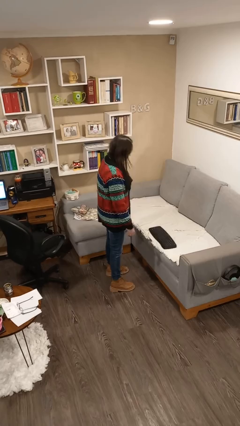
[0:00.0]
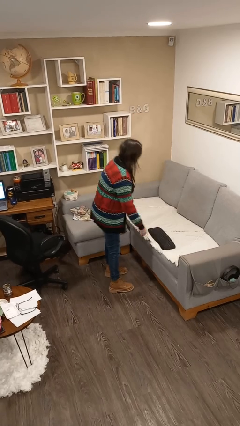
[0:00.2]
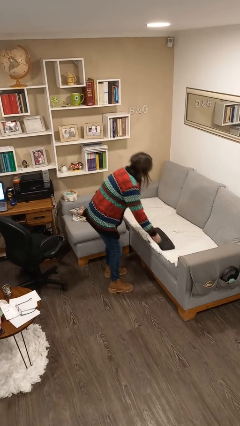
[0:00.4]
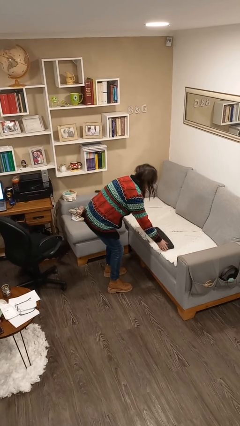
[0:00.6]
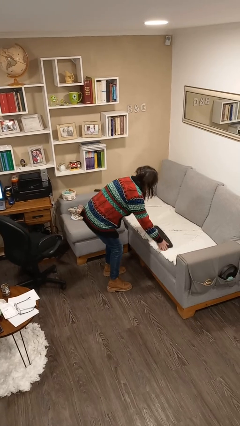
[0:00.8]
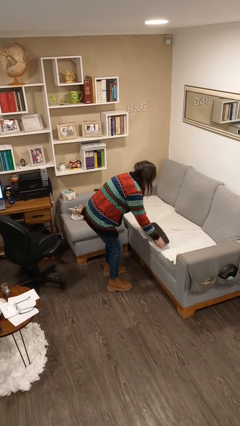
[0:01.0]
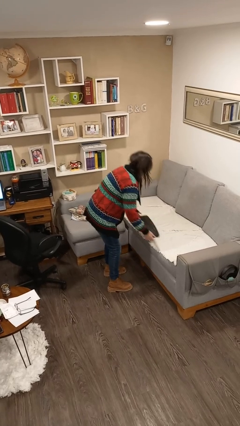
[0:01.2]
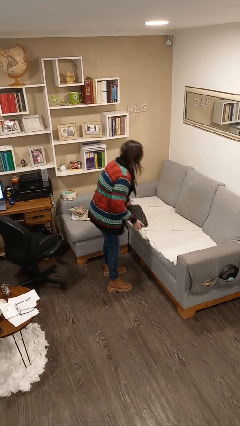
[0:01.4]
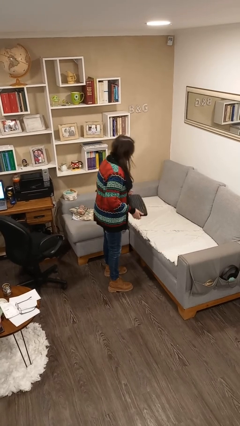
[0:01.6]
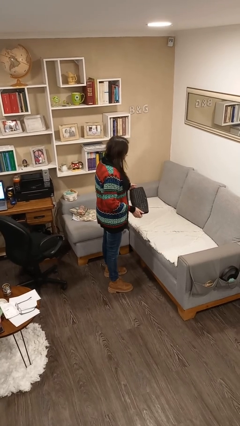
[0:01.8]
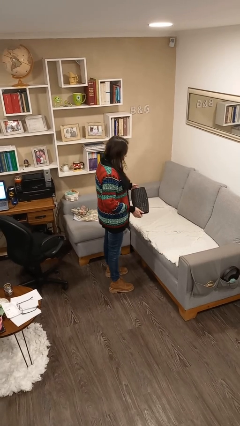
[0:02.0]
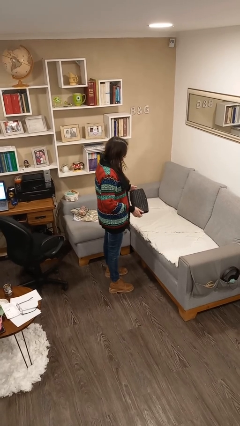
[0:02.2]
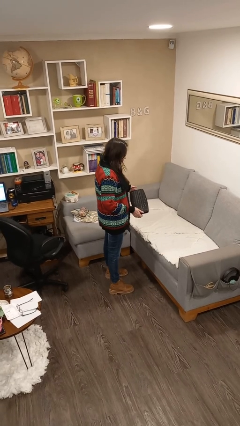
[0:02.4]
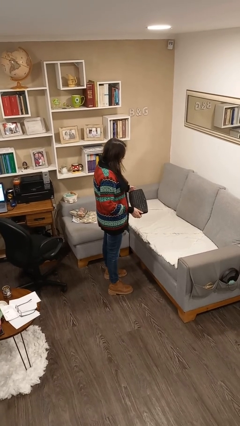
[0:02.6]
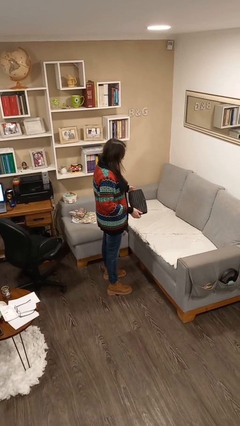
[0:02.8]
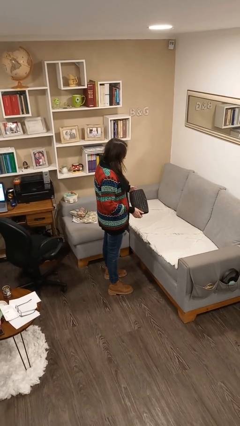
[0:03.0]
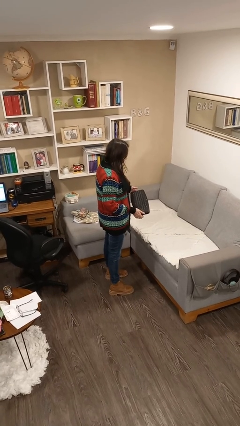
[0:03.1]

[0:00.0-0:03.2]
person picks up object from couch

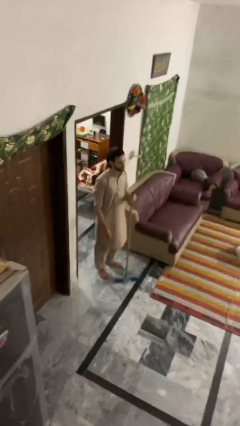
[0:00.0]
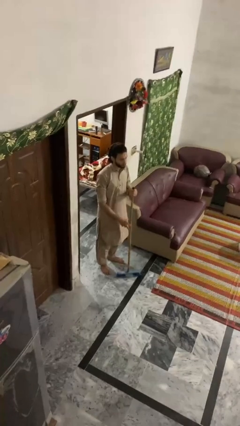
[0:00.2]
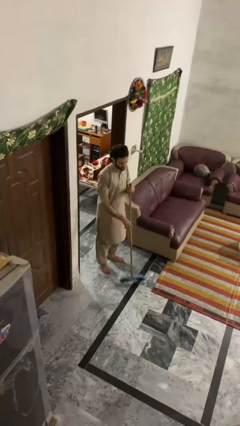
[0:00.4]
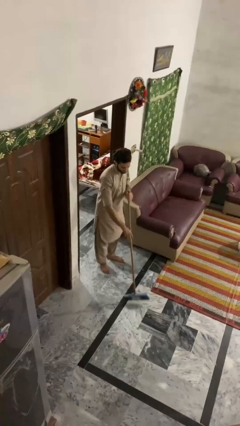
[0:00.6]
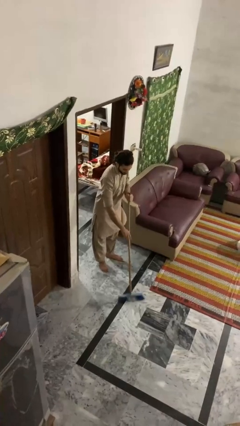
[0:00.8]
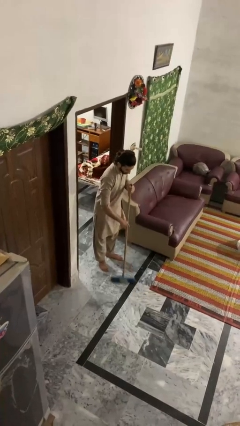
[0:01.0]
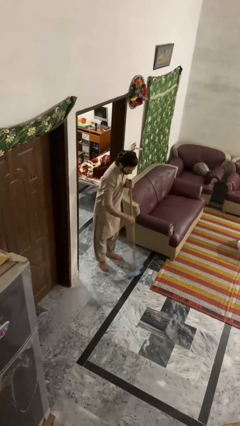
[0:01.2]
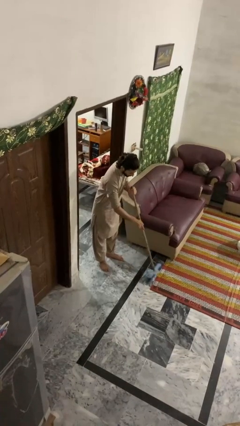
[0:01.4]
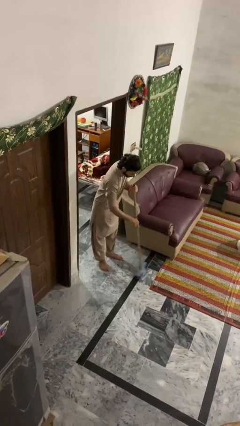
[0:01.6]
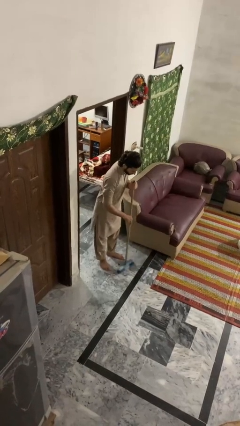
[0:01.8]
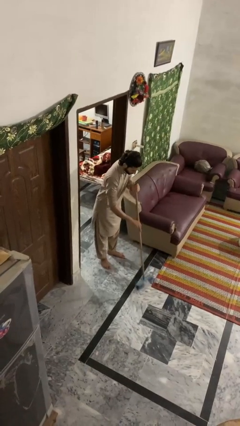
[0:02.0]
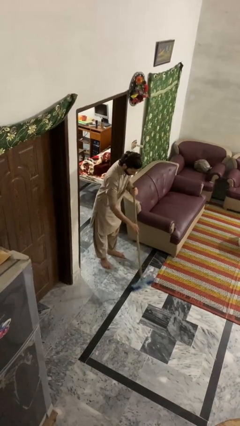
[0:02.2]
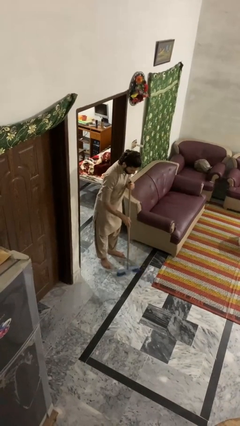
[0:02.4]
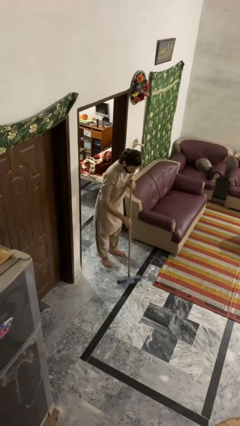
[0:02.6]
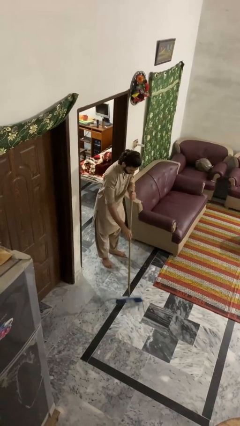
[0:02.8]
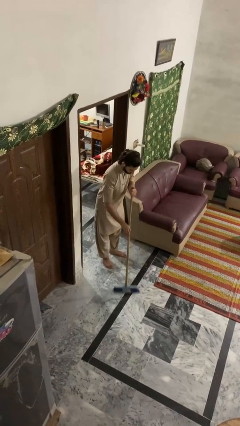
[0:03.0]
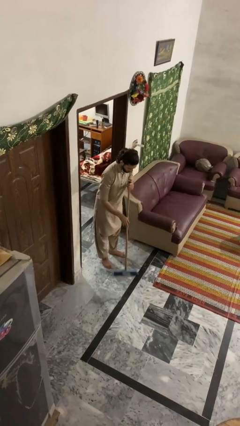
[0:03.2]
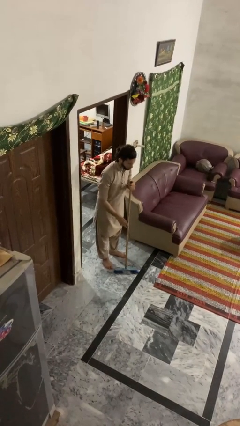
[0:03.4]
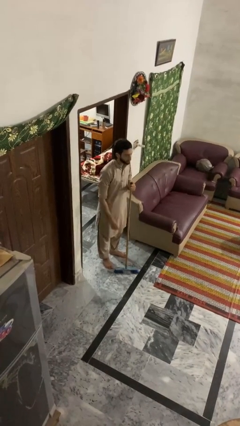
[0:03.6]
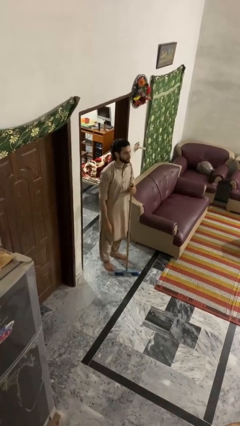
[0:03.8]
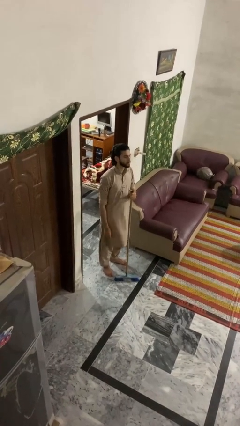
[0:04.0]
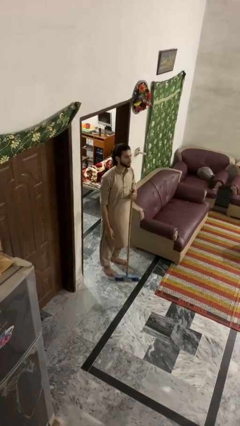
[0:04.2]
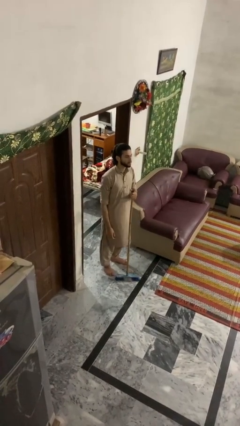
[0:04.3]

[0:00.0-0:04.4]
person sweeps floor

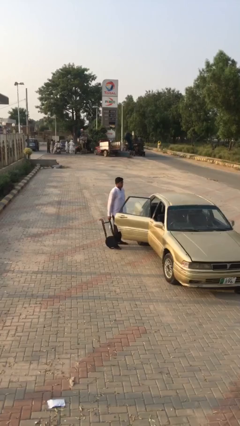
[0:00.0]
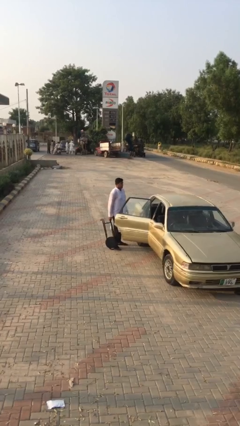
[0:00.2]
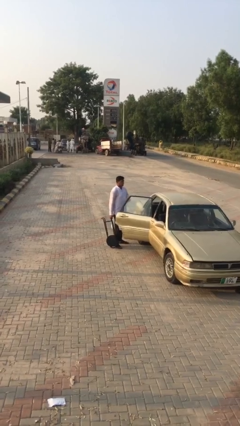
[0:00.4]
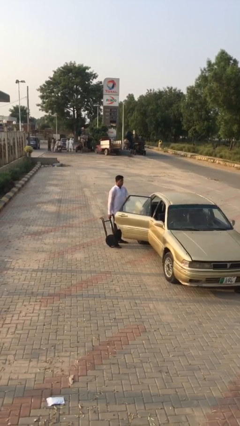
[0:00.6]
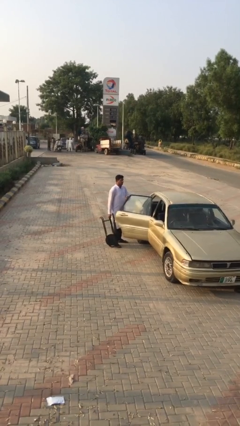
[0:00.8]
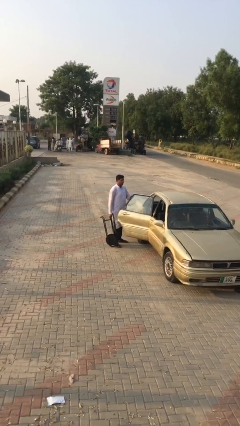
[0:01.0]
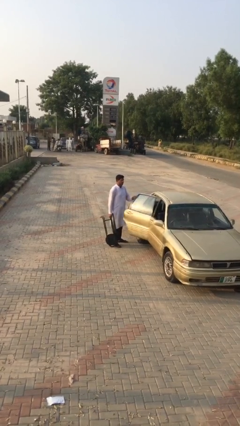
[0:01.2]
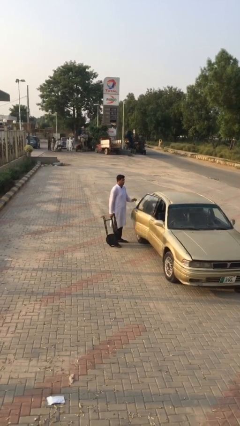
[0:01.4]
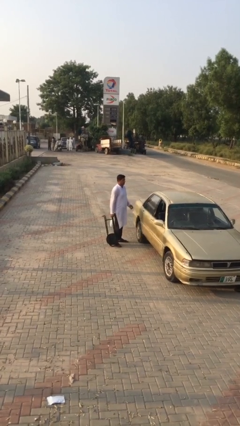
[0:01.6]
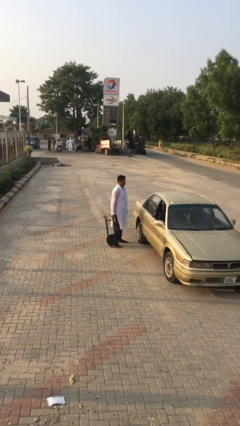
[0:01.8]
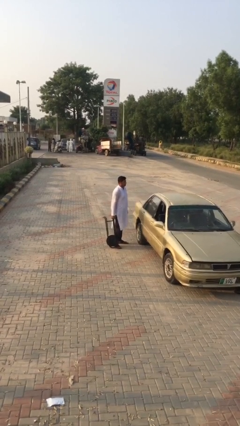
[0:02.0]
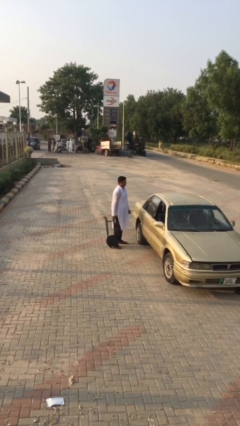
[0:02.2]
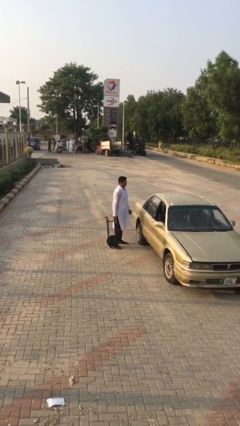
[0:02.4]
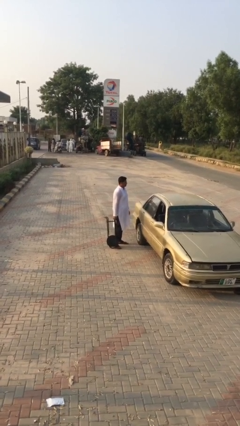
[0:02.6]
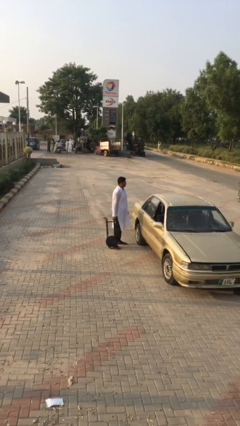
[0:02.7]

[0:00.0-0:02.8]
person closes car door

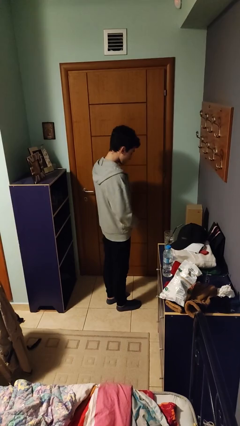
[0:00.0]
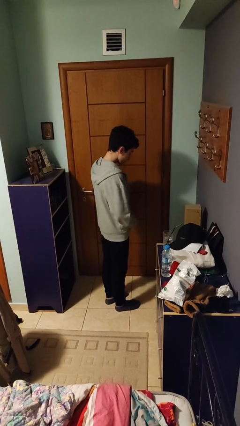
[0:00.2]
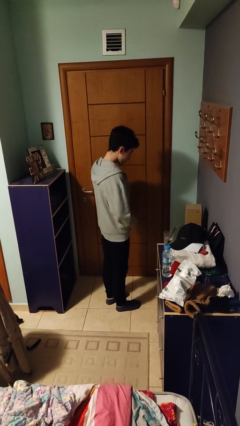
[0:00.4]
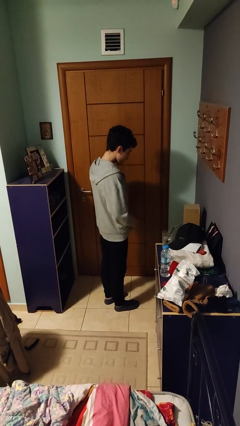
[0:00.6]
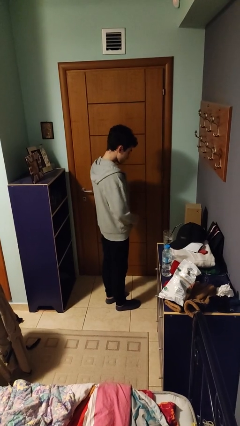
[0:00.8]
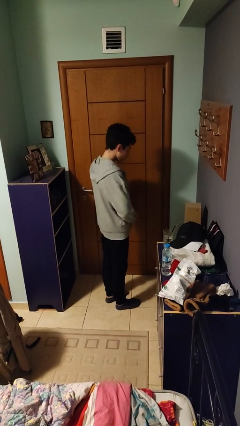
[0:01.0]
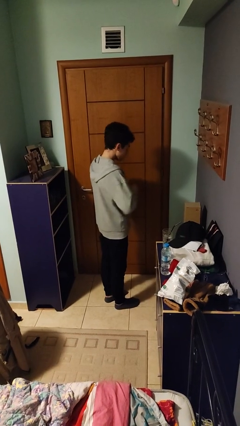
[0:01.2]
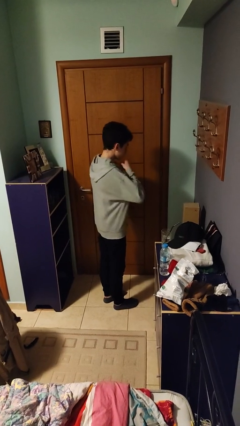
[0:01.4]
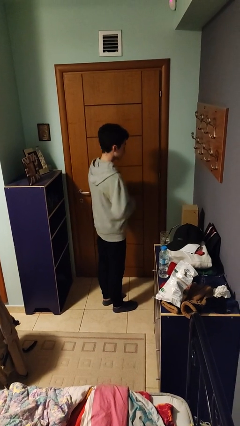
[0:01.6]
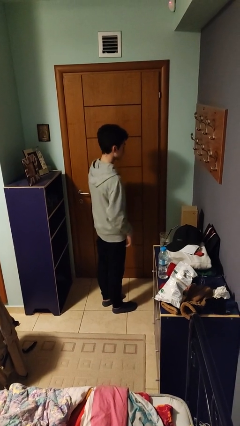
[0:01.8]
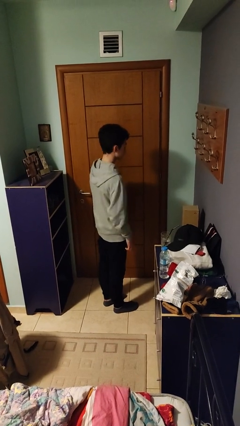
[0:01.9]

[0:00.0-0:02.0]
person zips up jacket

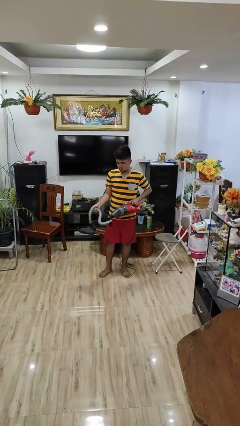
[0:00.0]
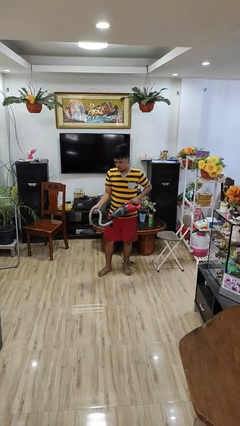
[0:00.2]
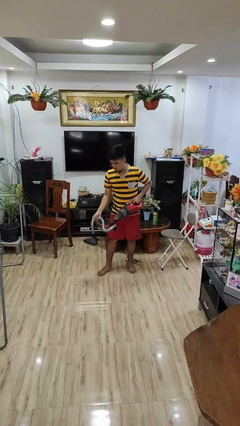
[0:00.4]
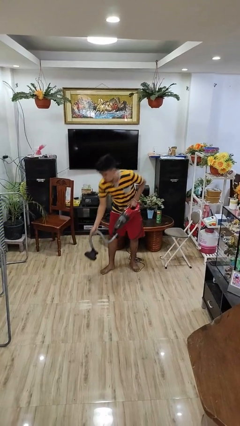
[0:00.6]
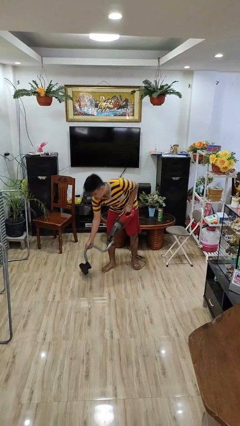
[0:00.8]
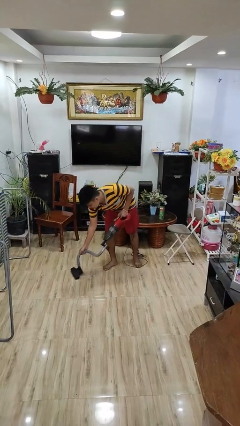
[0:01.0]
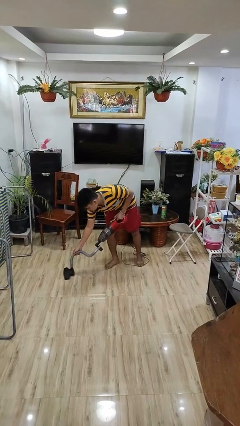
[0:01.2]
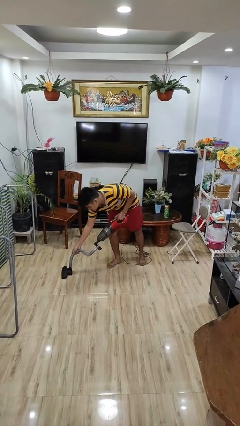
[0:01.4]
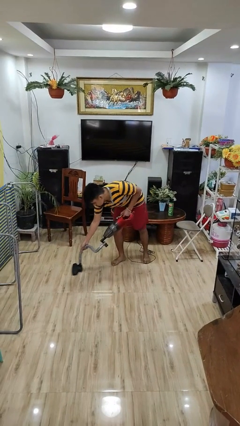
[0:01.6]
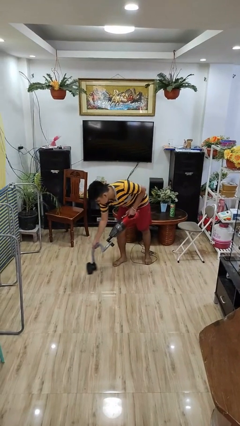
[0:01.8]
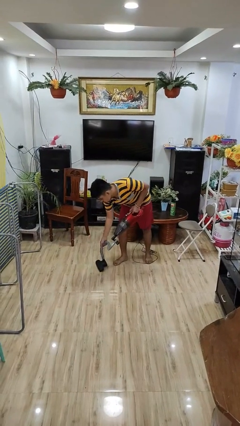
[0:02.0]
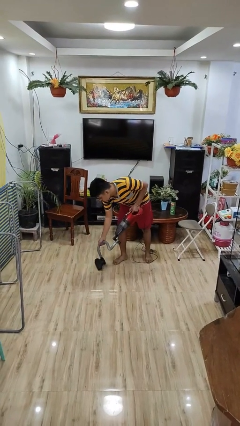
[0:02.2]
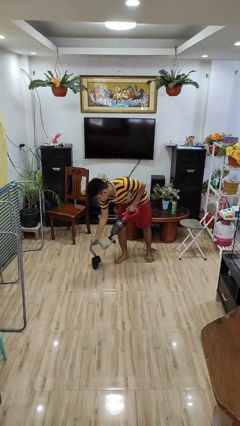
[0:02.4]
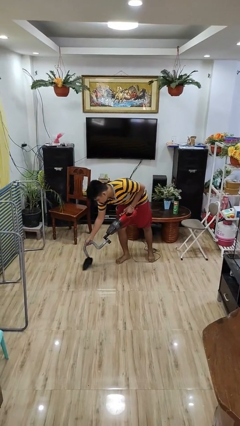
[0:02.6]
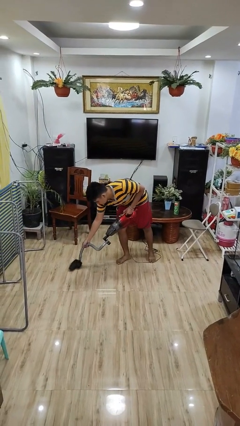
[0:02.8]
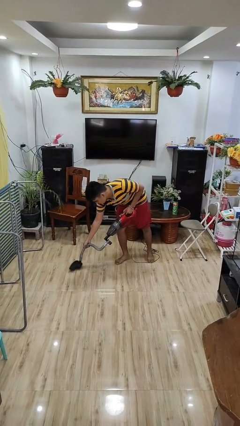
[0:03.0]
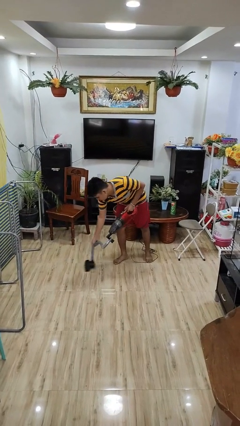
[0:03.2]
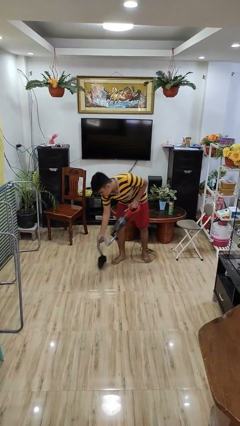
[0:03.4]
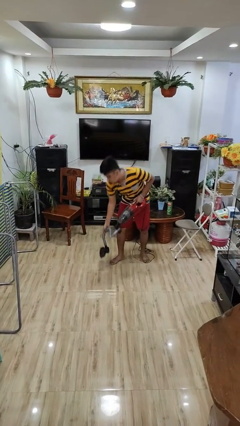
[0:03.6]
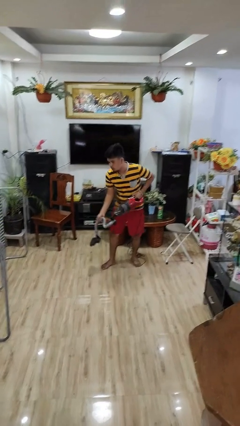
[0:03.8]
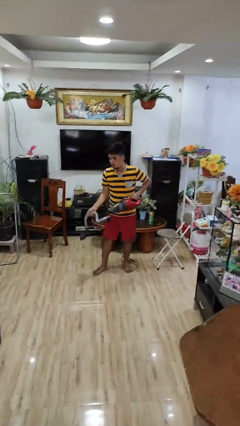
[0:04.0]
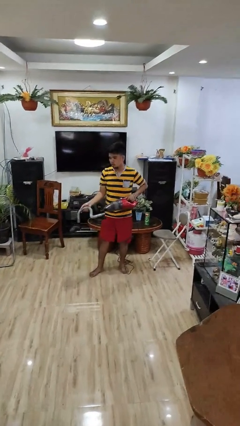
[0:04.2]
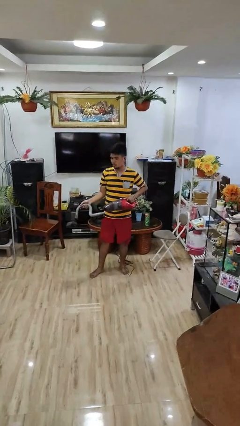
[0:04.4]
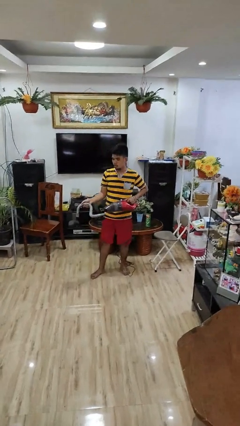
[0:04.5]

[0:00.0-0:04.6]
person vacuums carpet

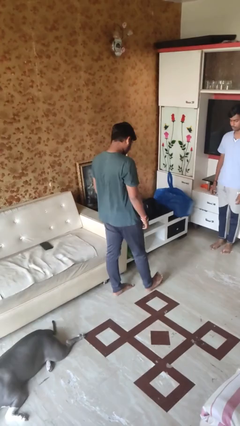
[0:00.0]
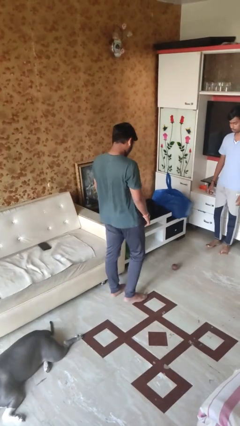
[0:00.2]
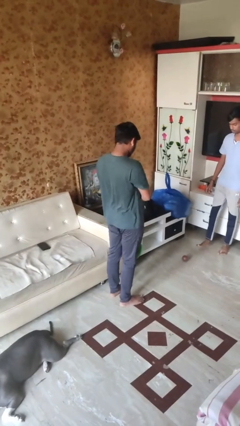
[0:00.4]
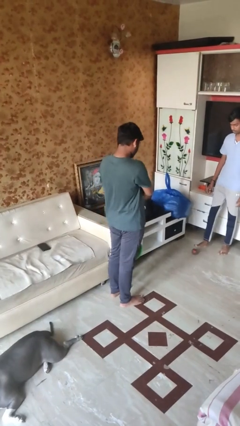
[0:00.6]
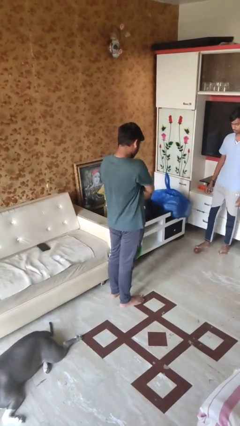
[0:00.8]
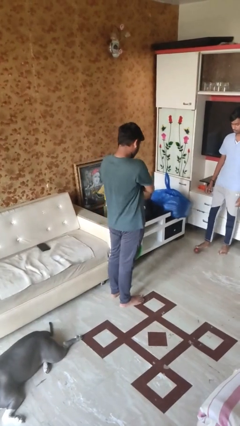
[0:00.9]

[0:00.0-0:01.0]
person kicks object to person
